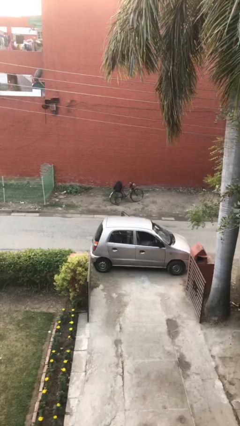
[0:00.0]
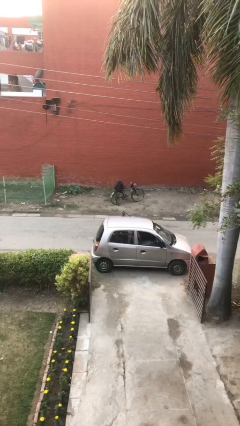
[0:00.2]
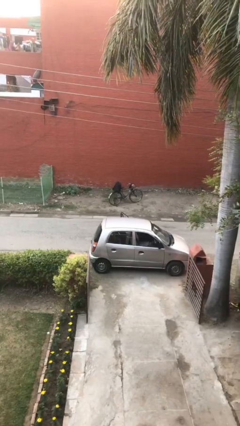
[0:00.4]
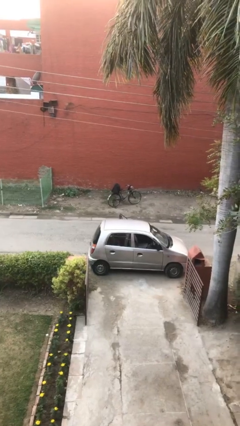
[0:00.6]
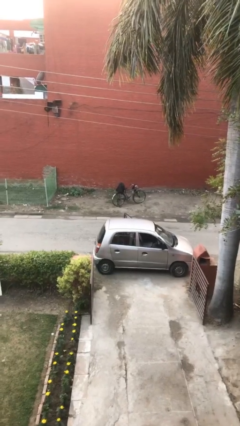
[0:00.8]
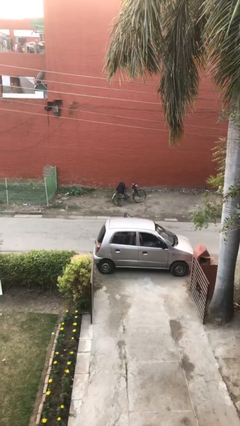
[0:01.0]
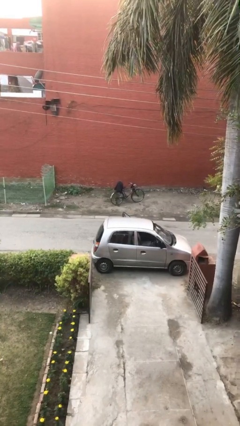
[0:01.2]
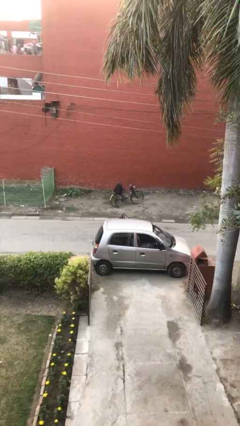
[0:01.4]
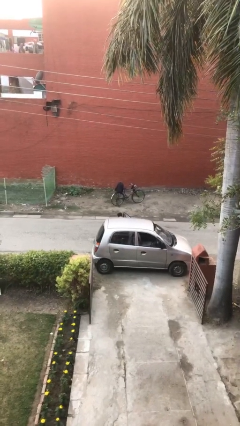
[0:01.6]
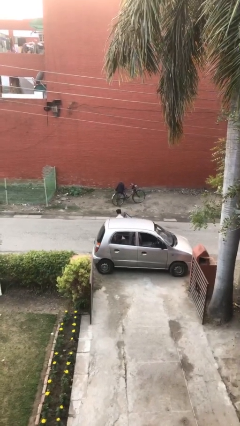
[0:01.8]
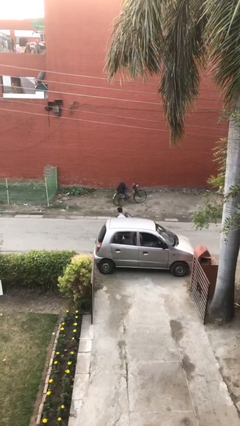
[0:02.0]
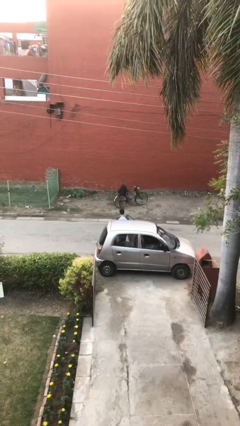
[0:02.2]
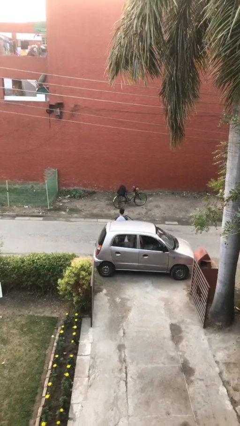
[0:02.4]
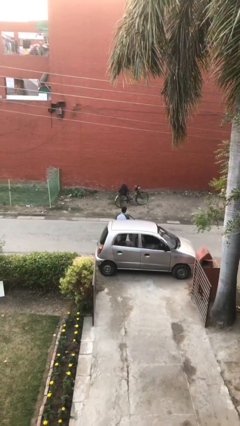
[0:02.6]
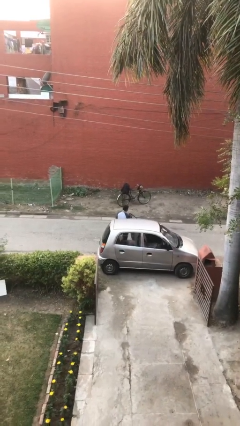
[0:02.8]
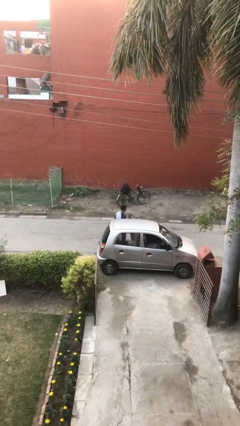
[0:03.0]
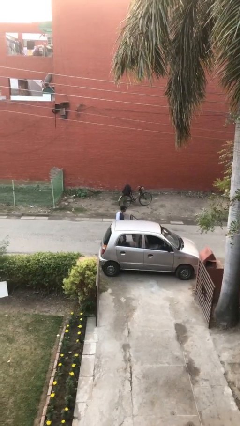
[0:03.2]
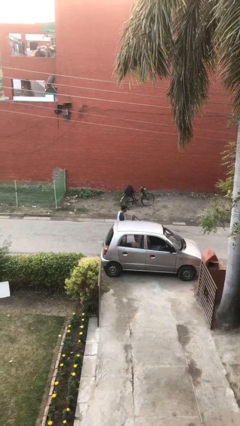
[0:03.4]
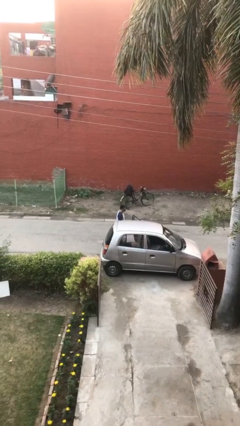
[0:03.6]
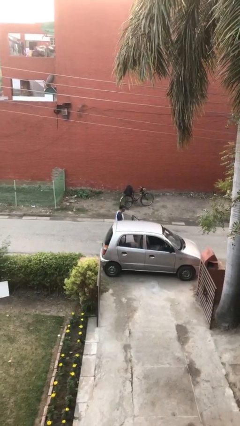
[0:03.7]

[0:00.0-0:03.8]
person exits car

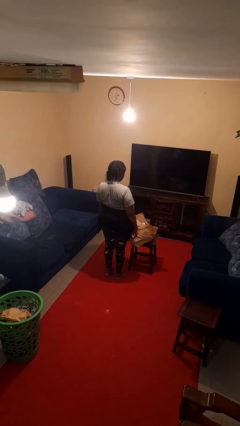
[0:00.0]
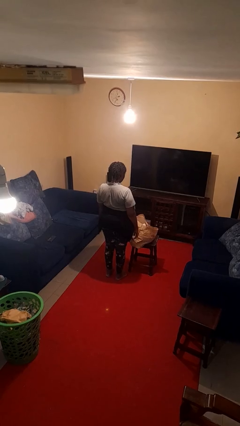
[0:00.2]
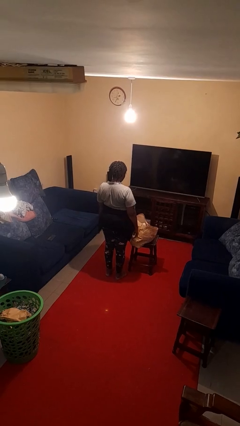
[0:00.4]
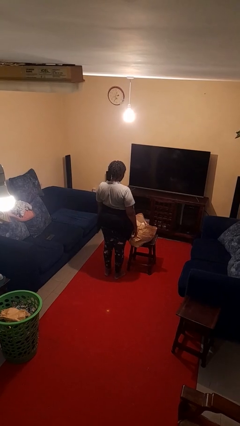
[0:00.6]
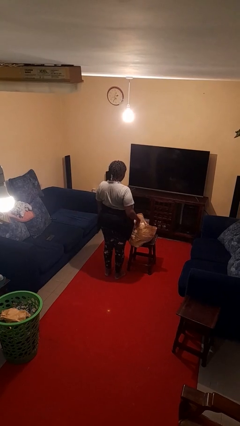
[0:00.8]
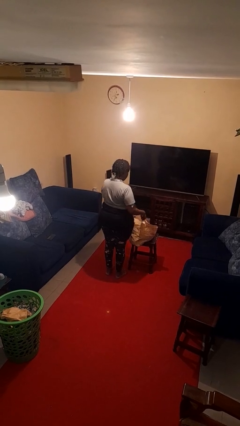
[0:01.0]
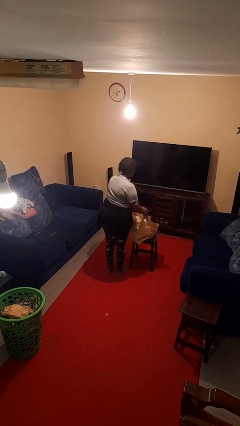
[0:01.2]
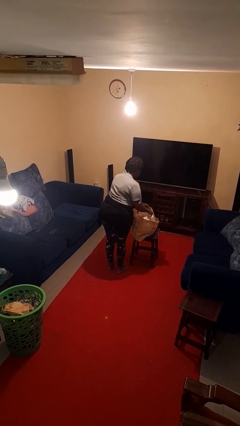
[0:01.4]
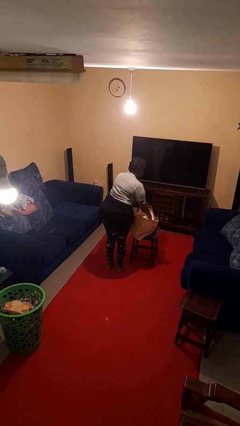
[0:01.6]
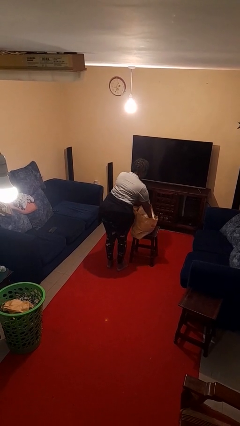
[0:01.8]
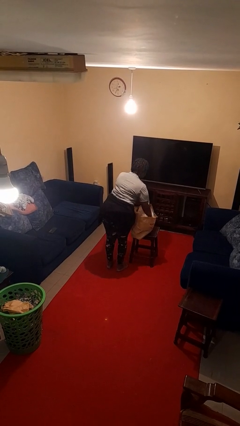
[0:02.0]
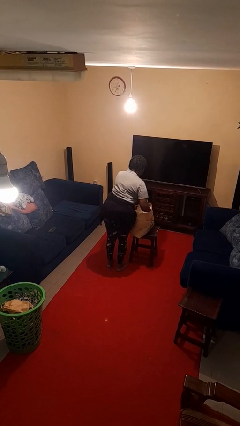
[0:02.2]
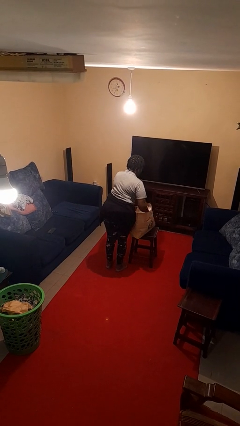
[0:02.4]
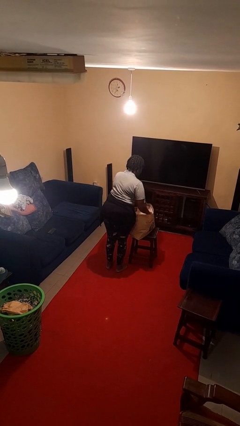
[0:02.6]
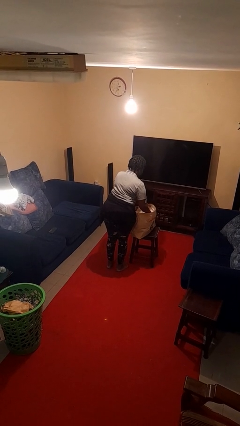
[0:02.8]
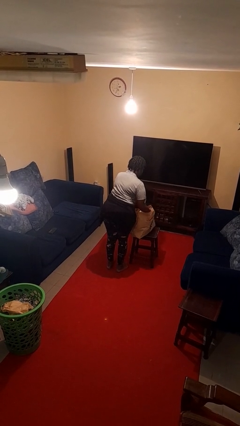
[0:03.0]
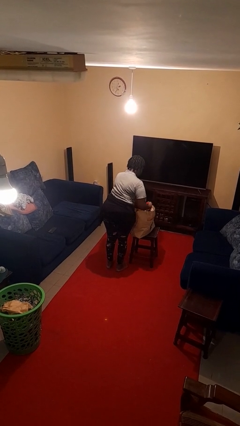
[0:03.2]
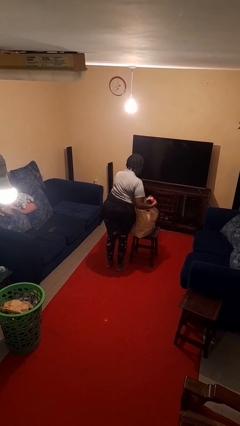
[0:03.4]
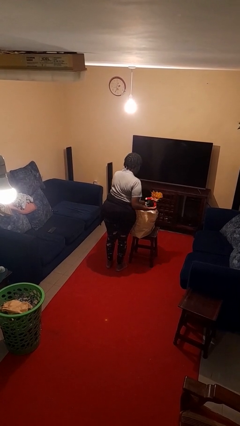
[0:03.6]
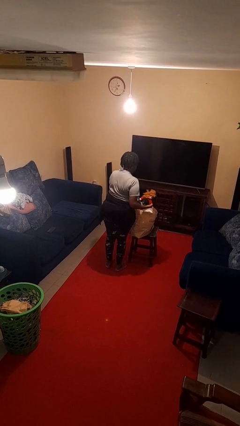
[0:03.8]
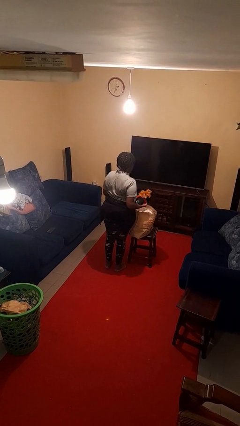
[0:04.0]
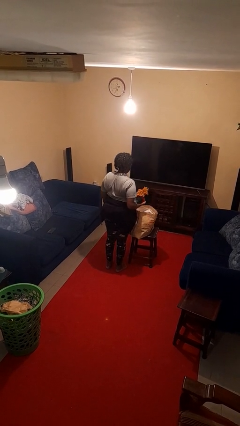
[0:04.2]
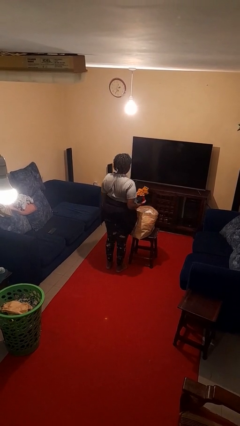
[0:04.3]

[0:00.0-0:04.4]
person takes object from bag

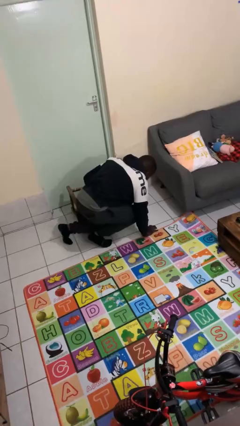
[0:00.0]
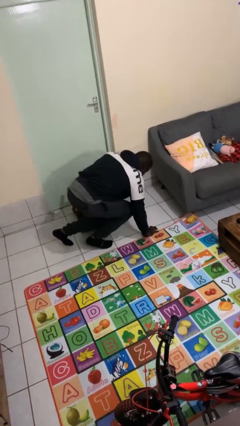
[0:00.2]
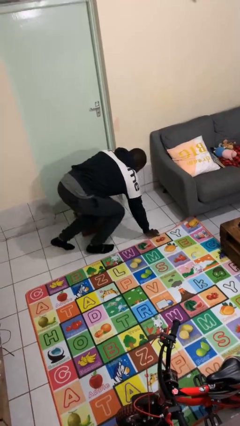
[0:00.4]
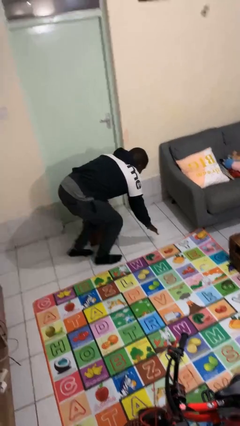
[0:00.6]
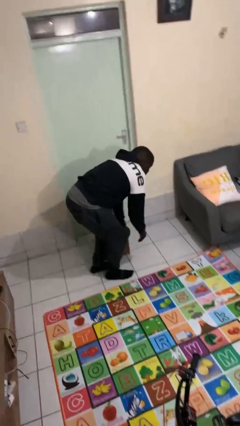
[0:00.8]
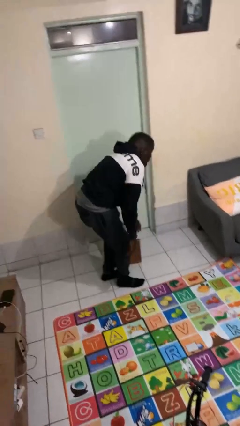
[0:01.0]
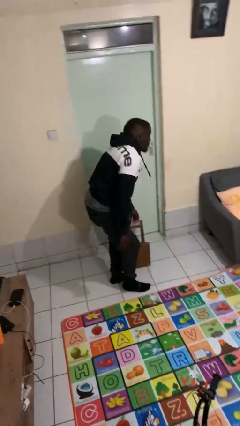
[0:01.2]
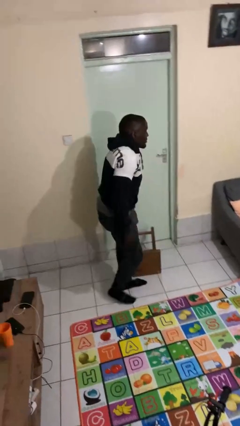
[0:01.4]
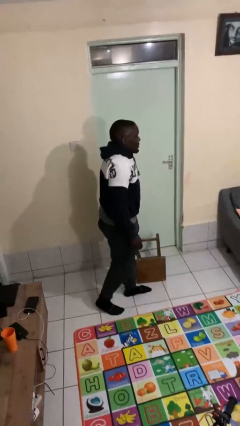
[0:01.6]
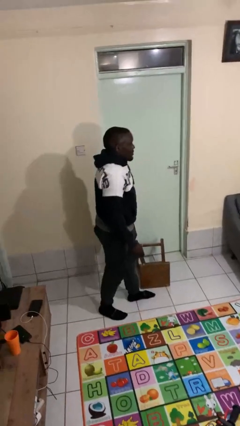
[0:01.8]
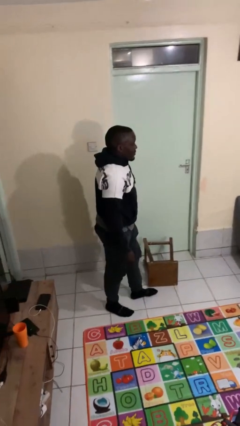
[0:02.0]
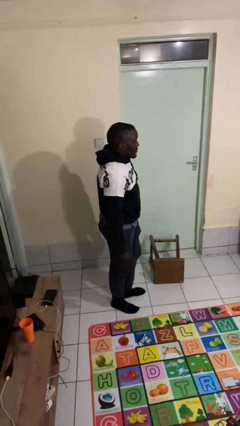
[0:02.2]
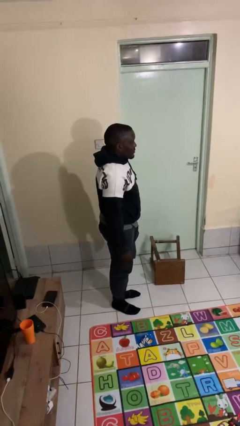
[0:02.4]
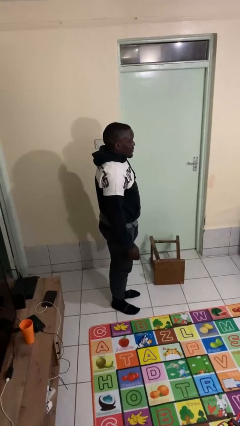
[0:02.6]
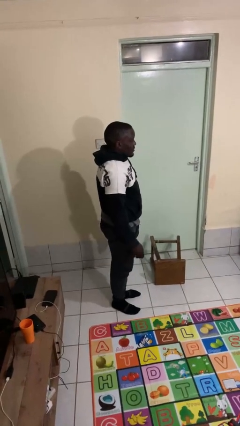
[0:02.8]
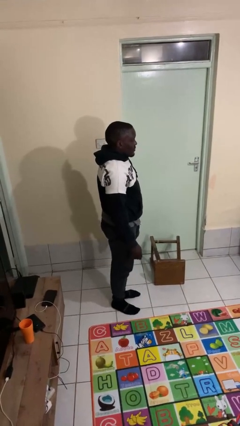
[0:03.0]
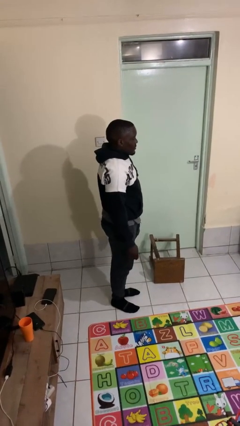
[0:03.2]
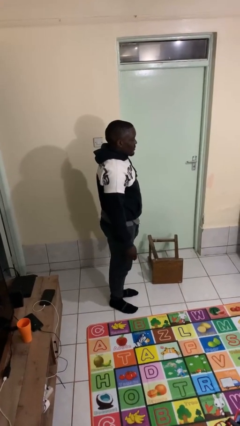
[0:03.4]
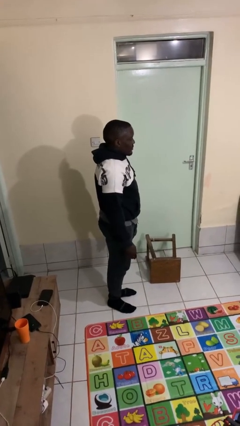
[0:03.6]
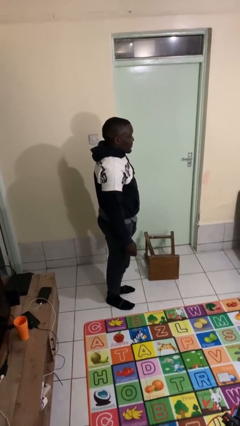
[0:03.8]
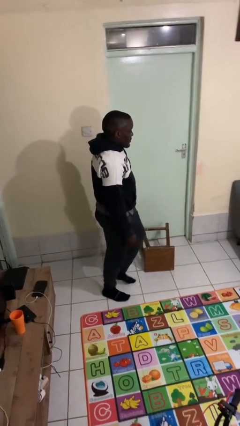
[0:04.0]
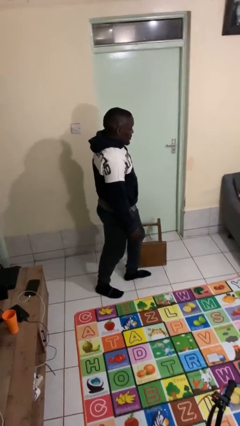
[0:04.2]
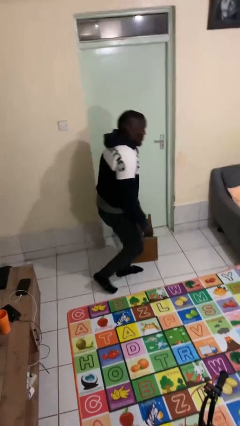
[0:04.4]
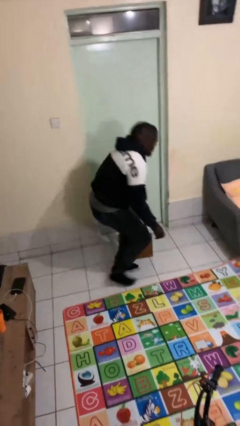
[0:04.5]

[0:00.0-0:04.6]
person stands up from floor

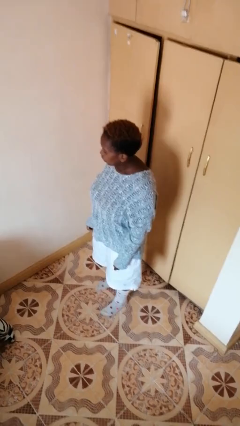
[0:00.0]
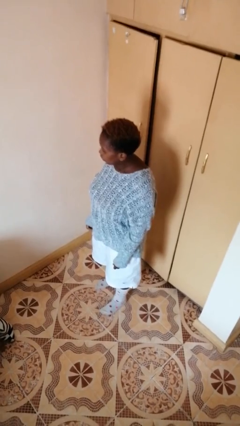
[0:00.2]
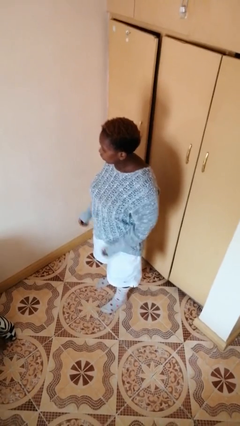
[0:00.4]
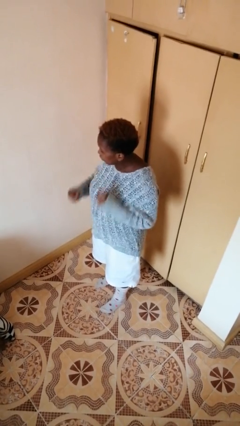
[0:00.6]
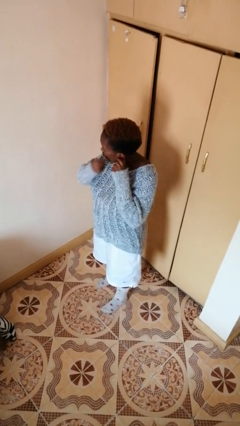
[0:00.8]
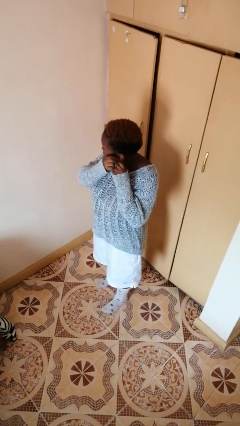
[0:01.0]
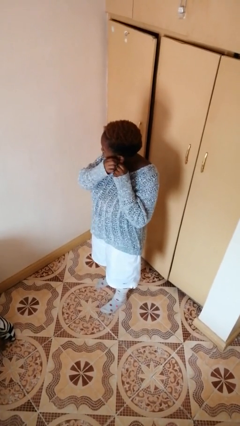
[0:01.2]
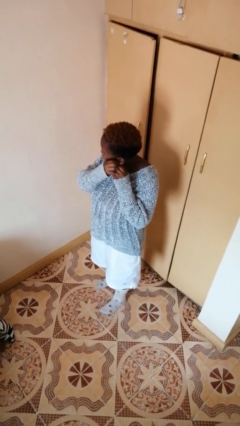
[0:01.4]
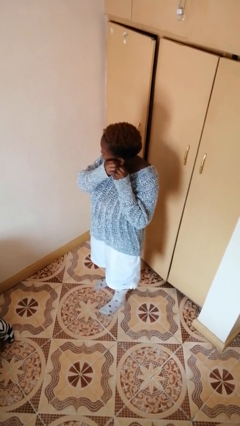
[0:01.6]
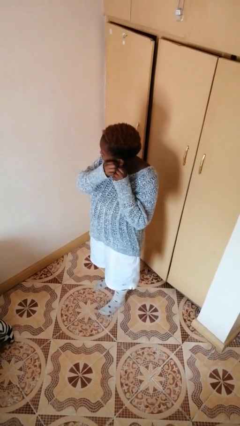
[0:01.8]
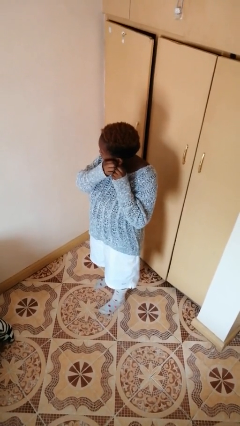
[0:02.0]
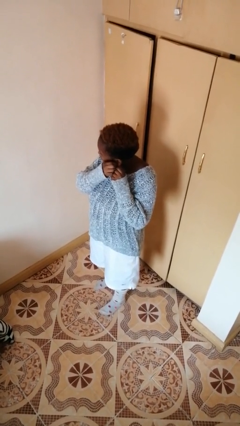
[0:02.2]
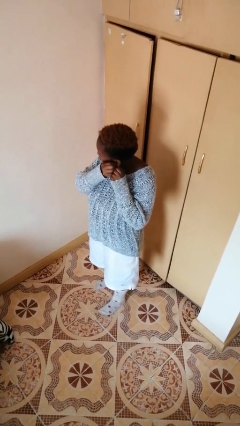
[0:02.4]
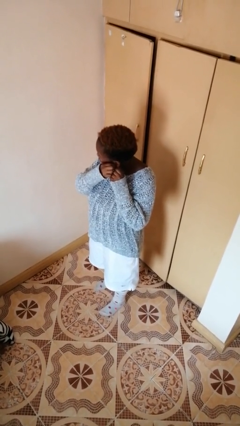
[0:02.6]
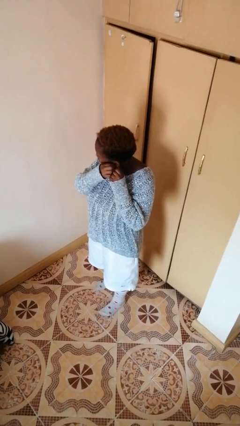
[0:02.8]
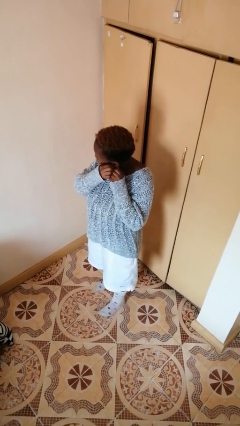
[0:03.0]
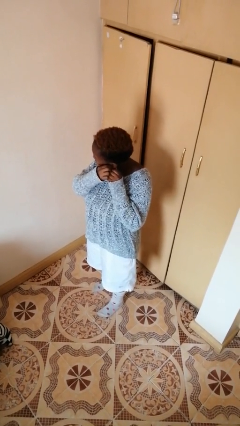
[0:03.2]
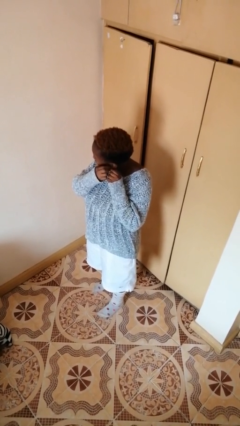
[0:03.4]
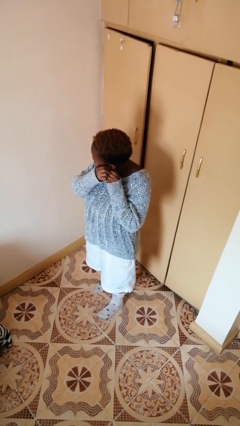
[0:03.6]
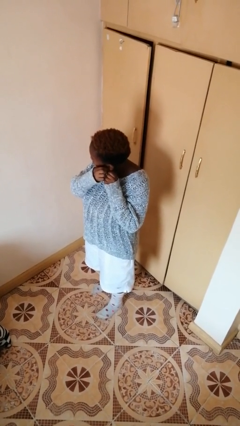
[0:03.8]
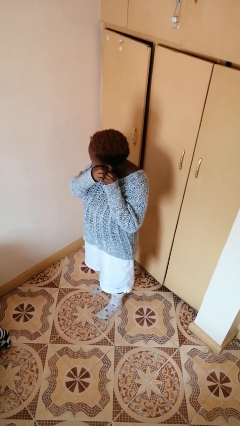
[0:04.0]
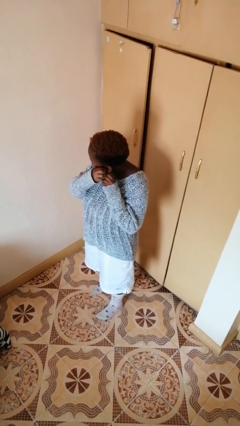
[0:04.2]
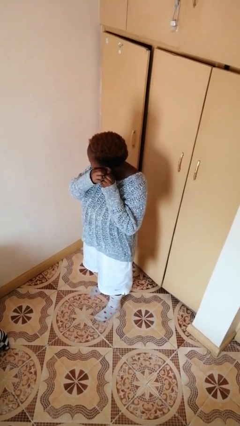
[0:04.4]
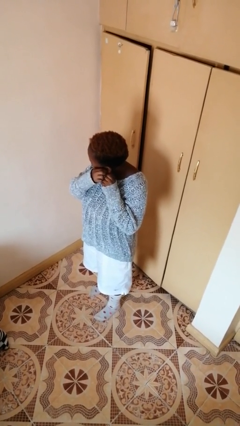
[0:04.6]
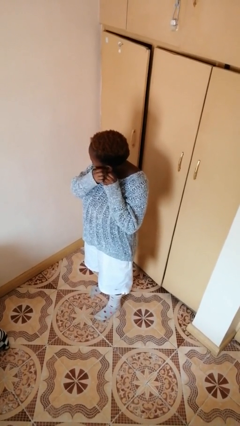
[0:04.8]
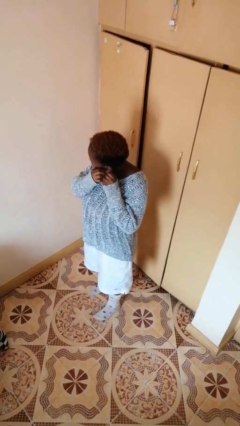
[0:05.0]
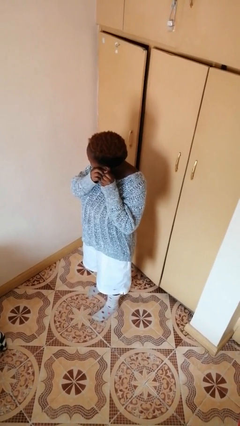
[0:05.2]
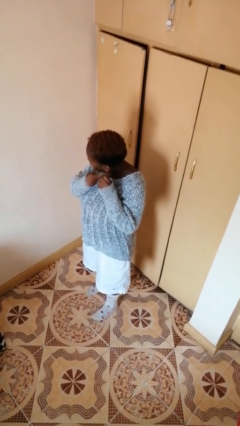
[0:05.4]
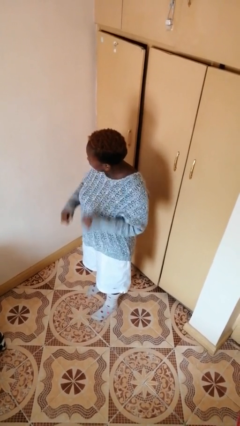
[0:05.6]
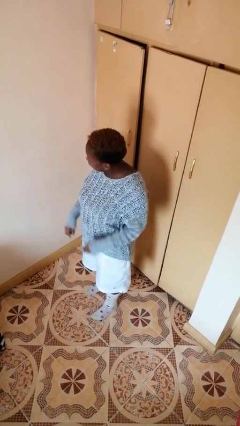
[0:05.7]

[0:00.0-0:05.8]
person puts on earrings
